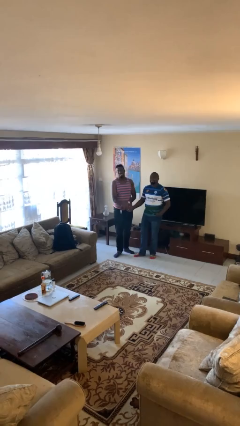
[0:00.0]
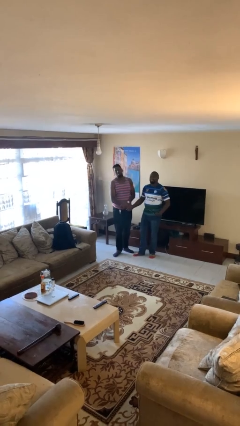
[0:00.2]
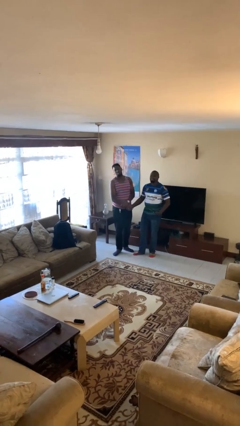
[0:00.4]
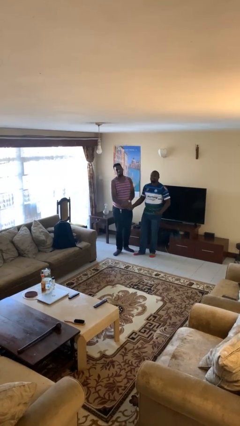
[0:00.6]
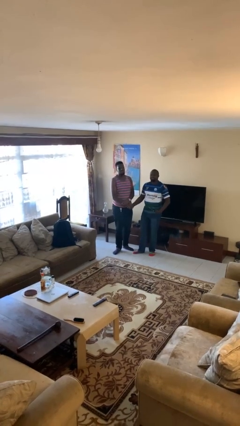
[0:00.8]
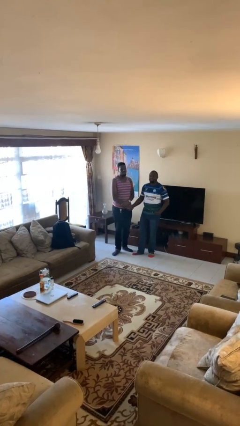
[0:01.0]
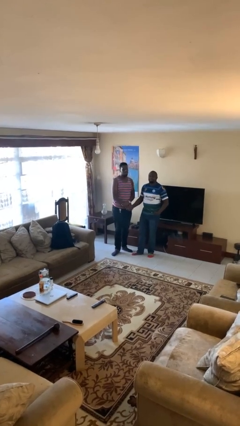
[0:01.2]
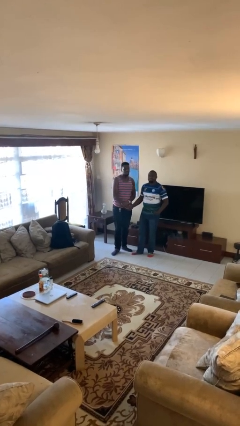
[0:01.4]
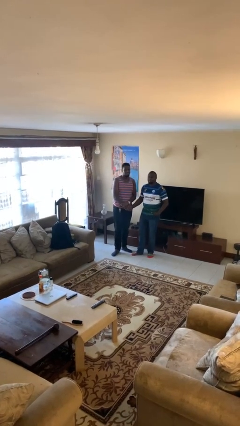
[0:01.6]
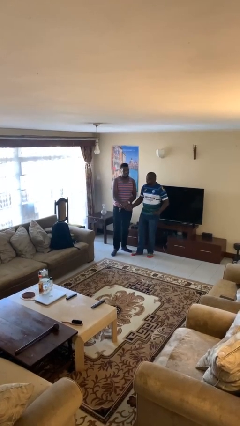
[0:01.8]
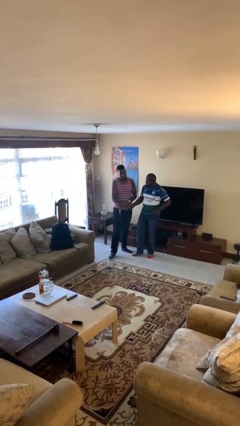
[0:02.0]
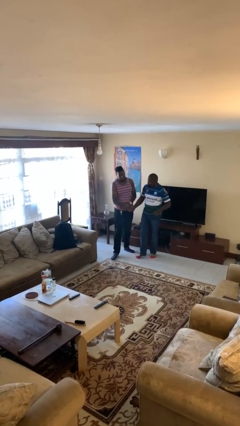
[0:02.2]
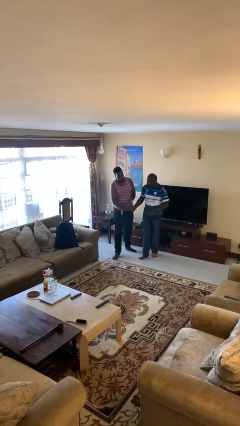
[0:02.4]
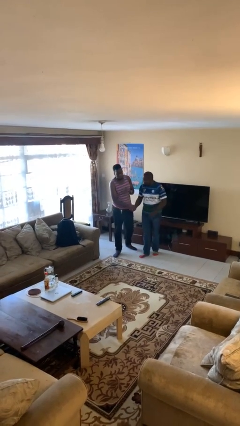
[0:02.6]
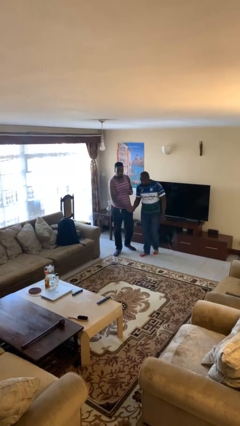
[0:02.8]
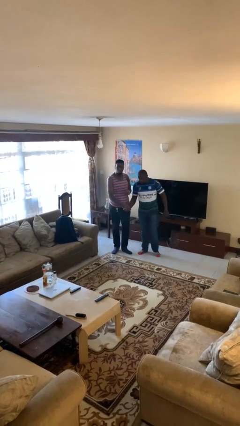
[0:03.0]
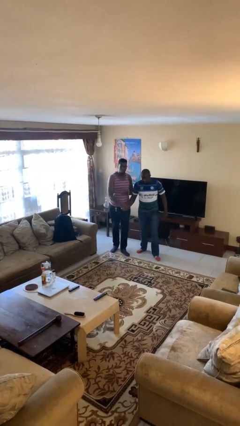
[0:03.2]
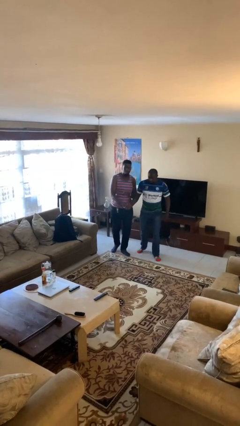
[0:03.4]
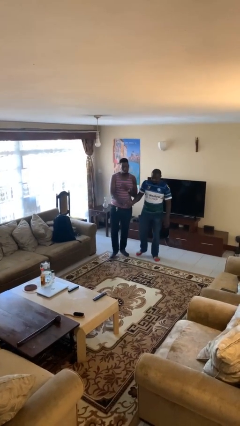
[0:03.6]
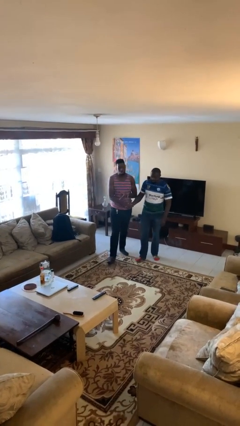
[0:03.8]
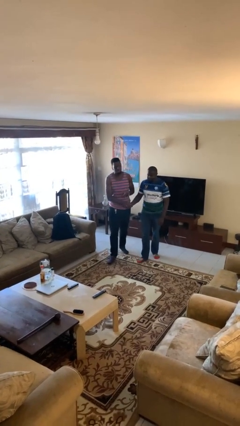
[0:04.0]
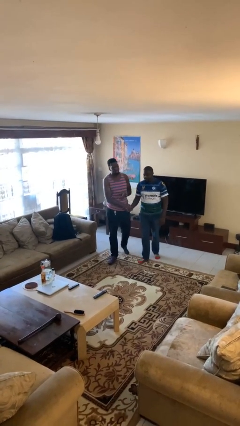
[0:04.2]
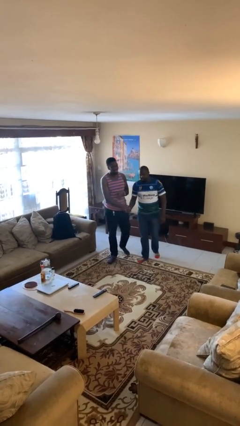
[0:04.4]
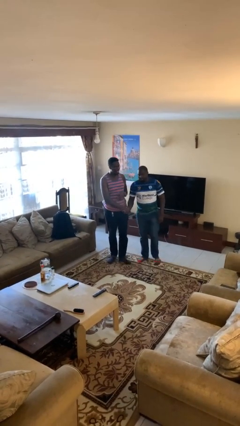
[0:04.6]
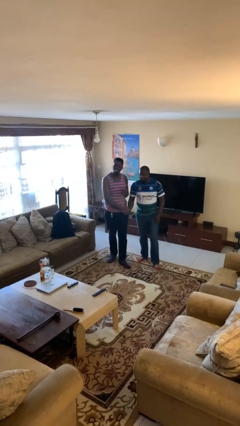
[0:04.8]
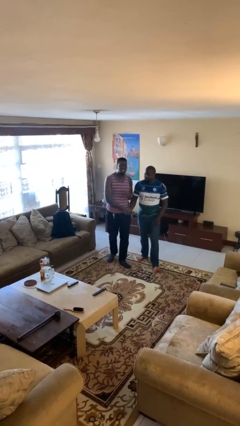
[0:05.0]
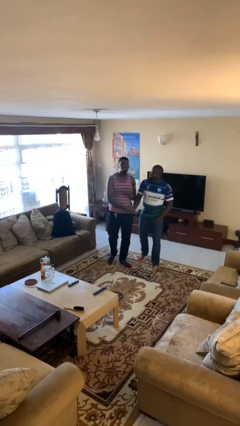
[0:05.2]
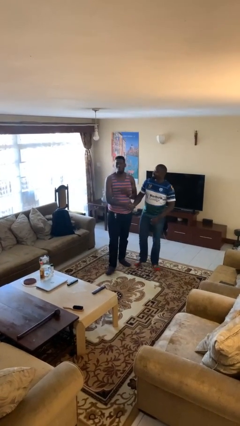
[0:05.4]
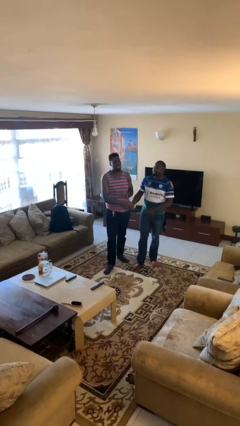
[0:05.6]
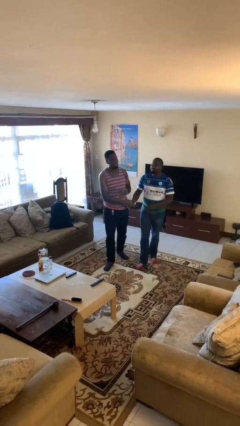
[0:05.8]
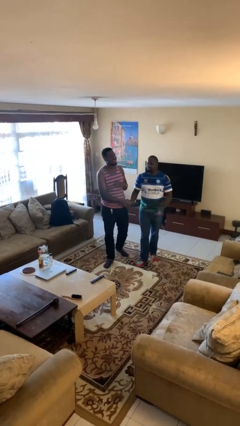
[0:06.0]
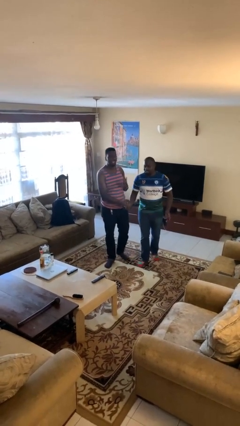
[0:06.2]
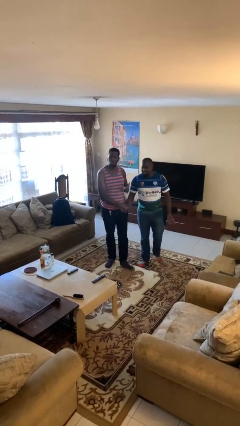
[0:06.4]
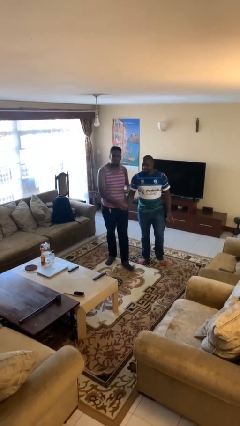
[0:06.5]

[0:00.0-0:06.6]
person holds hand

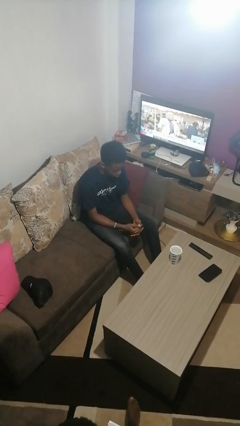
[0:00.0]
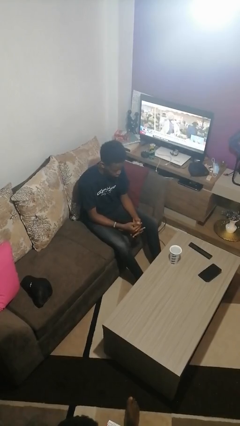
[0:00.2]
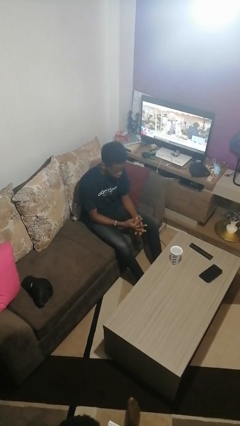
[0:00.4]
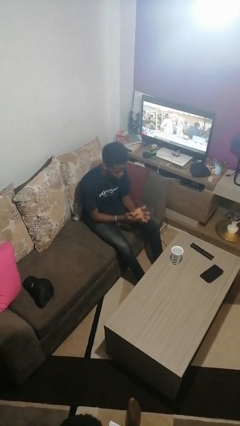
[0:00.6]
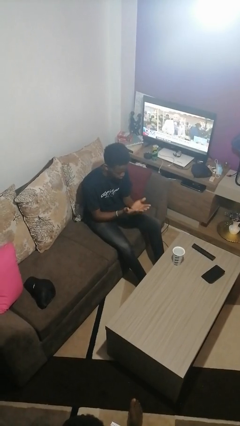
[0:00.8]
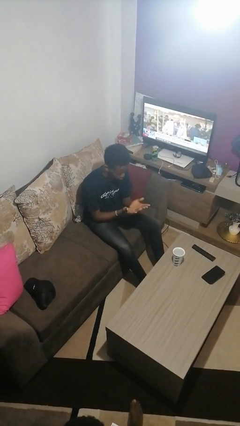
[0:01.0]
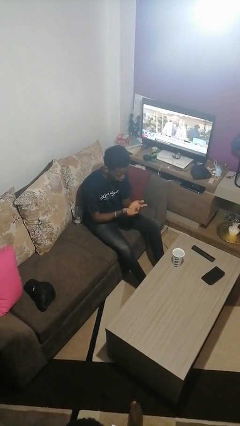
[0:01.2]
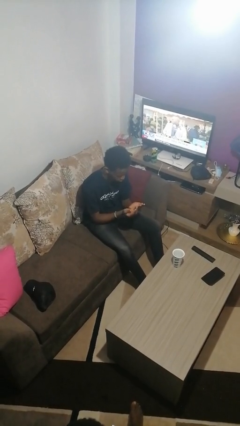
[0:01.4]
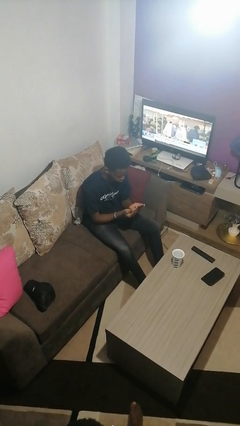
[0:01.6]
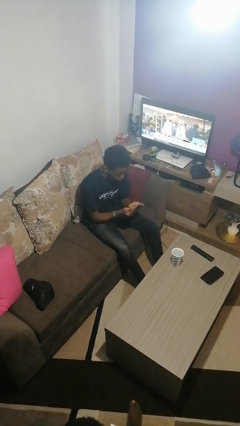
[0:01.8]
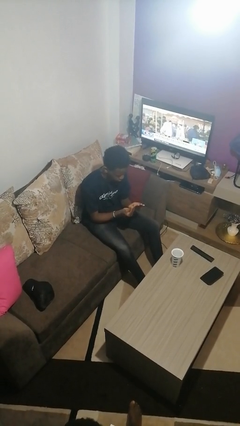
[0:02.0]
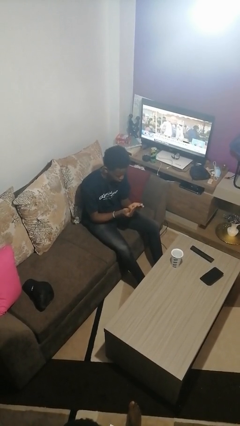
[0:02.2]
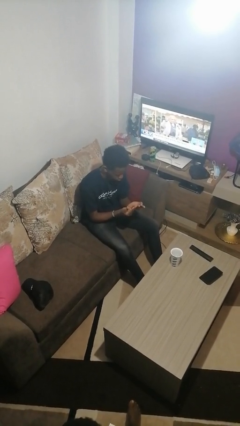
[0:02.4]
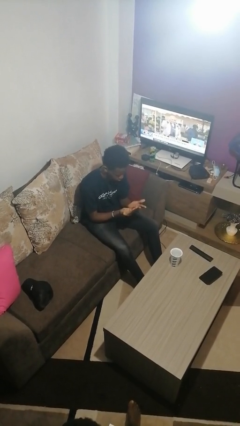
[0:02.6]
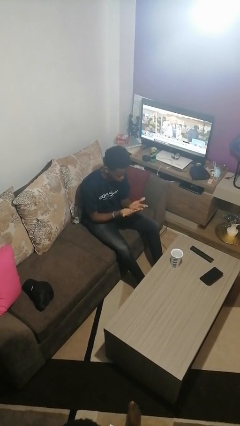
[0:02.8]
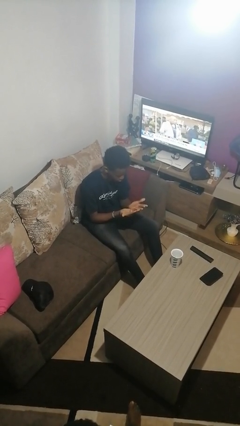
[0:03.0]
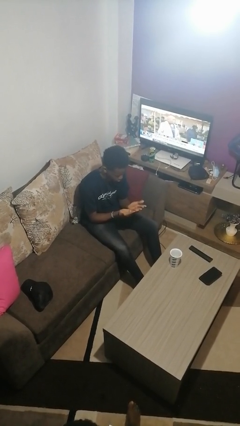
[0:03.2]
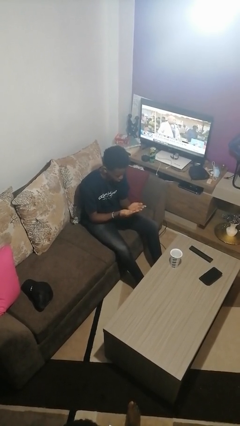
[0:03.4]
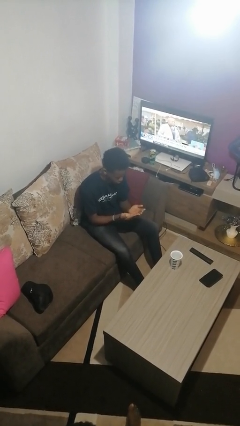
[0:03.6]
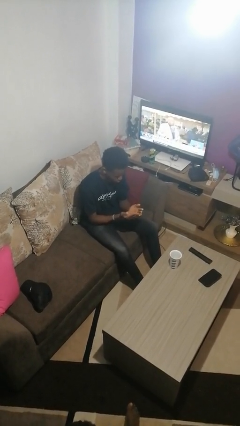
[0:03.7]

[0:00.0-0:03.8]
person looks at hands in lap

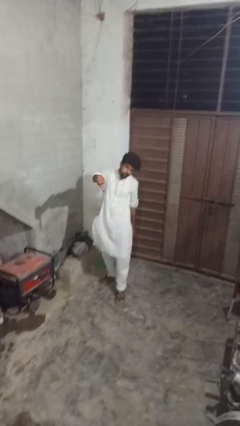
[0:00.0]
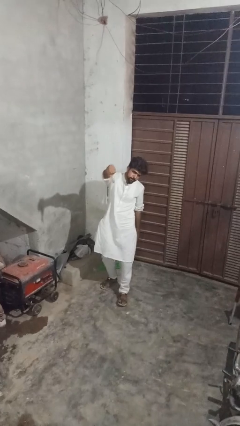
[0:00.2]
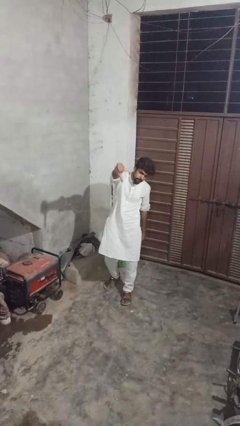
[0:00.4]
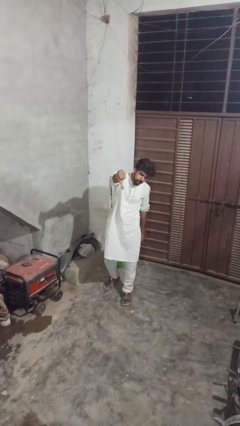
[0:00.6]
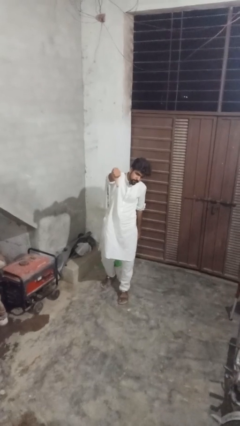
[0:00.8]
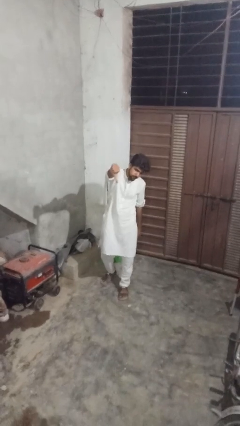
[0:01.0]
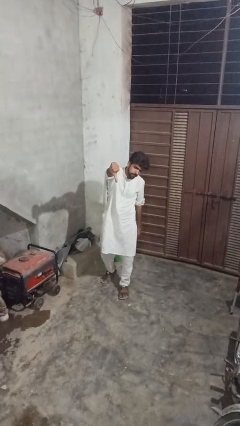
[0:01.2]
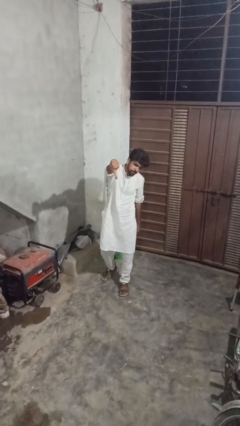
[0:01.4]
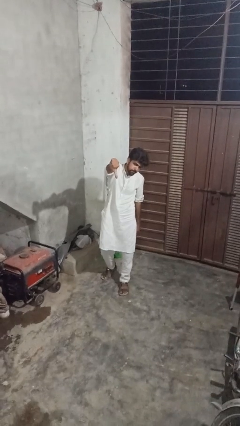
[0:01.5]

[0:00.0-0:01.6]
person gestures thumbs down

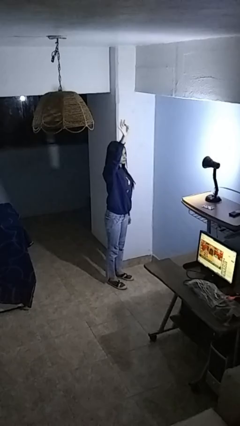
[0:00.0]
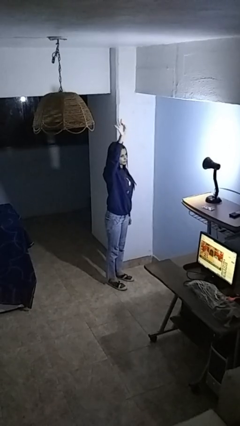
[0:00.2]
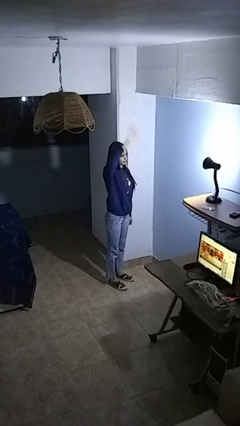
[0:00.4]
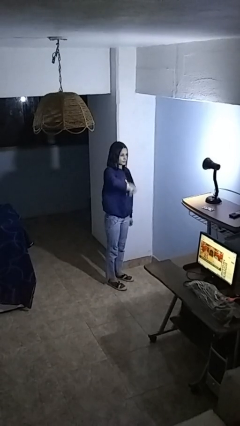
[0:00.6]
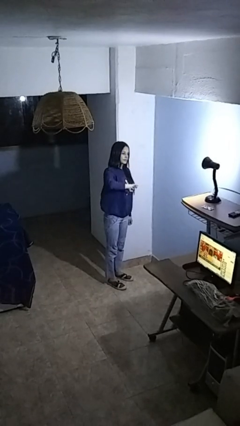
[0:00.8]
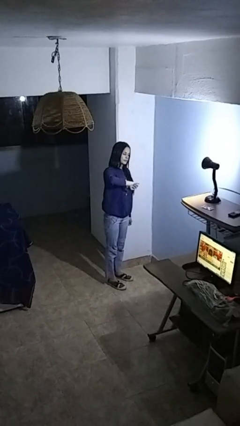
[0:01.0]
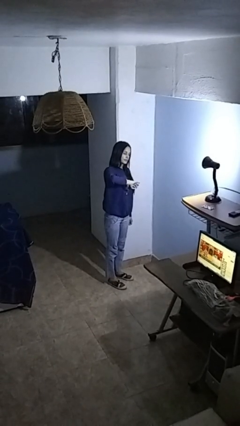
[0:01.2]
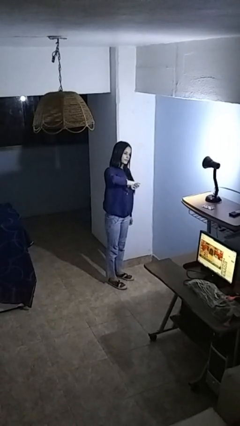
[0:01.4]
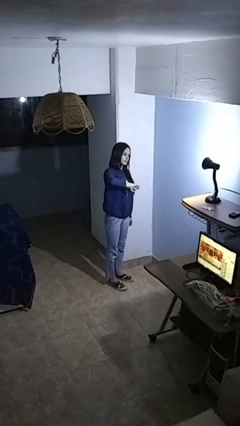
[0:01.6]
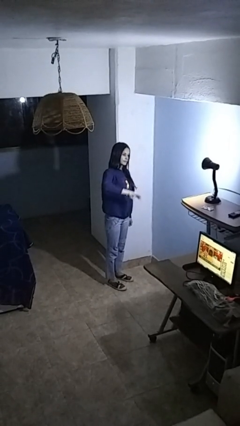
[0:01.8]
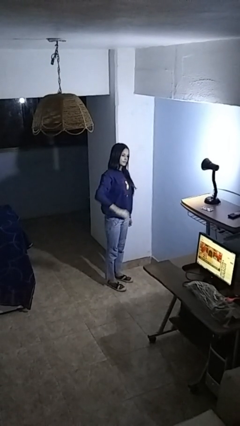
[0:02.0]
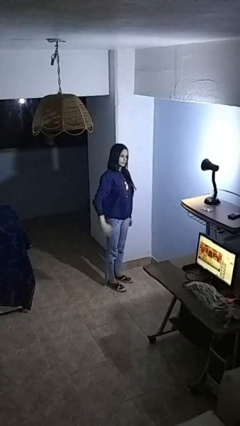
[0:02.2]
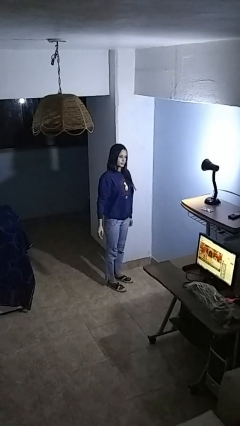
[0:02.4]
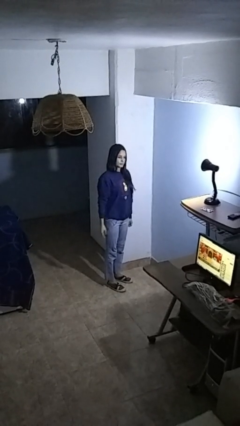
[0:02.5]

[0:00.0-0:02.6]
person gestures swipe down

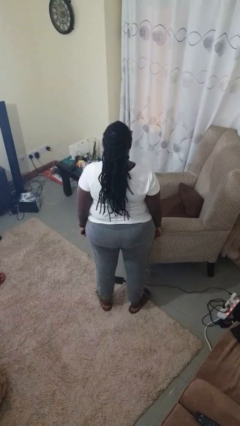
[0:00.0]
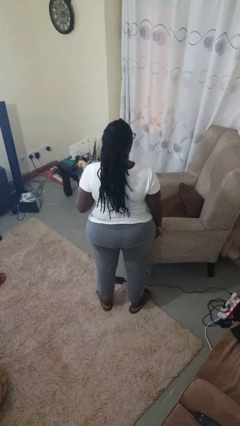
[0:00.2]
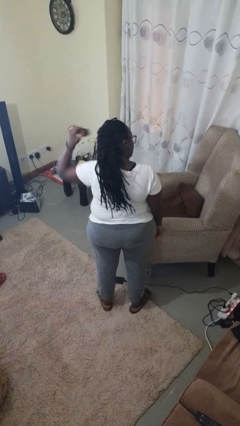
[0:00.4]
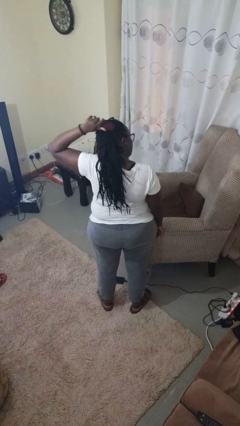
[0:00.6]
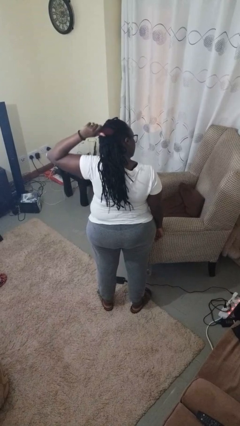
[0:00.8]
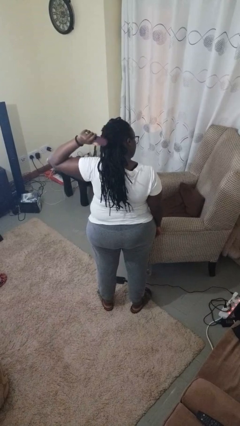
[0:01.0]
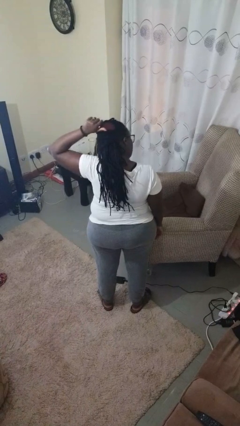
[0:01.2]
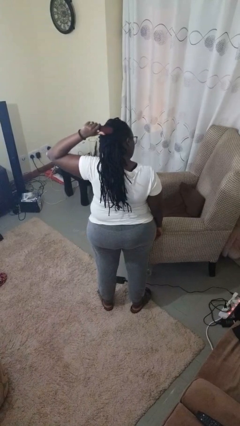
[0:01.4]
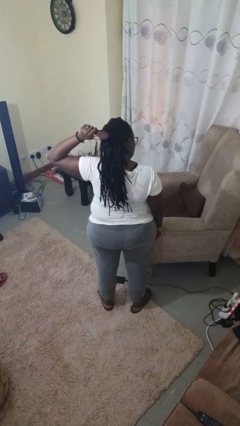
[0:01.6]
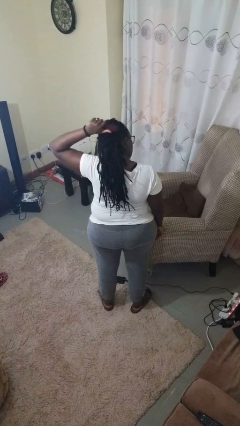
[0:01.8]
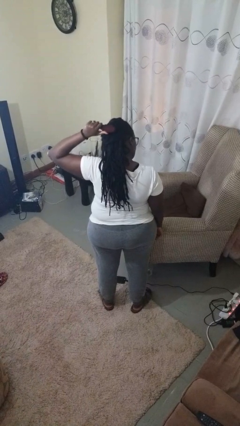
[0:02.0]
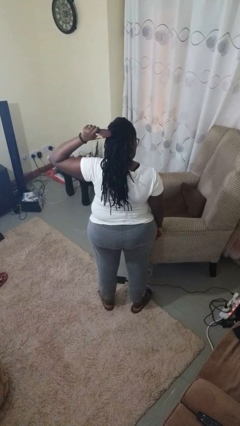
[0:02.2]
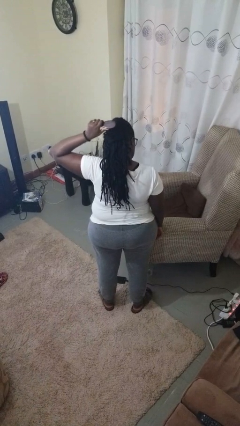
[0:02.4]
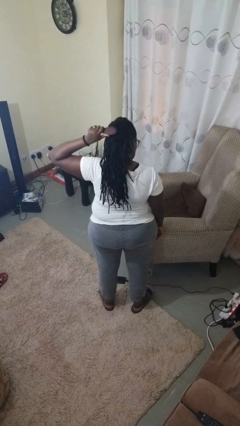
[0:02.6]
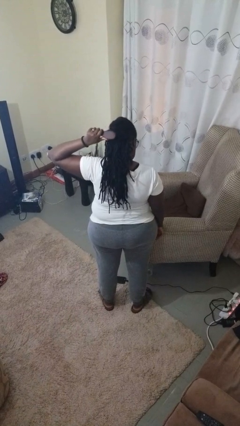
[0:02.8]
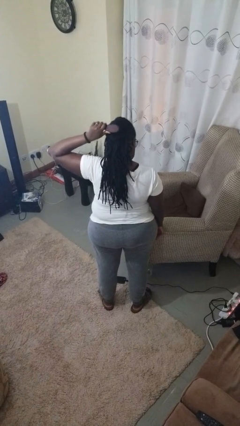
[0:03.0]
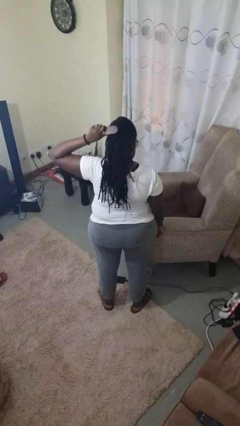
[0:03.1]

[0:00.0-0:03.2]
person brushes hair
